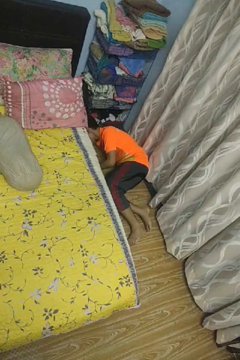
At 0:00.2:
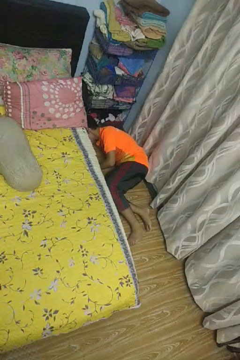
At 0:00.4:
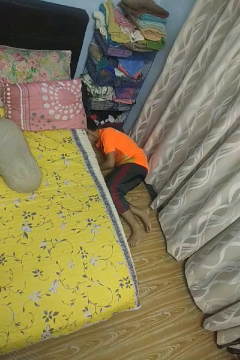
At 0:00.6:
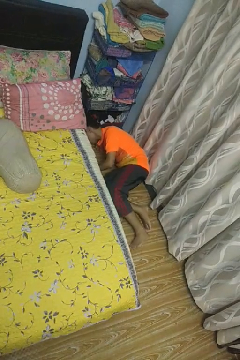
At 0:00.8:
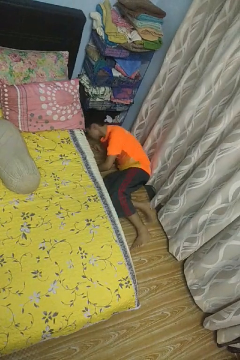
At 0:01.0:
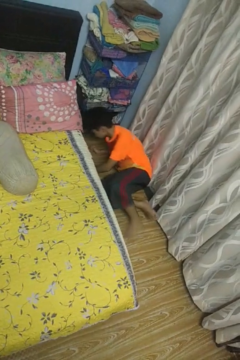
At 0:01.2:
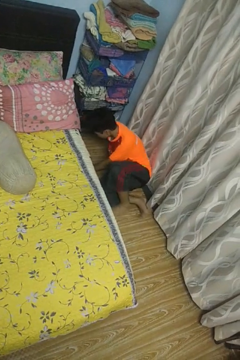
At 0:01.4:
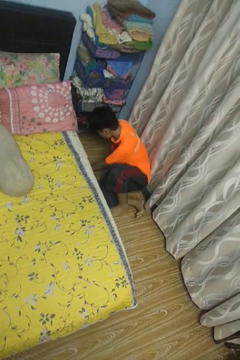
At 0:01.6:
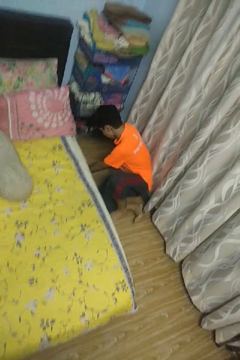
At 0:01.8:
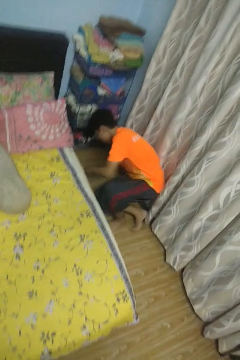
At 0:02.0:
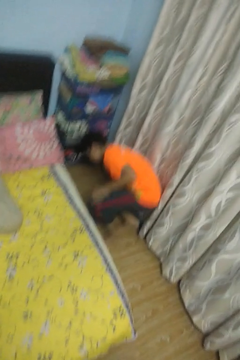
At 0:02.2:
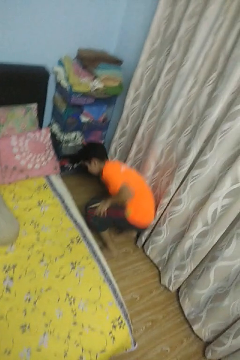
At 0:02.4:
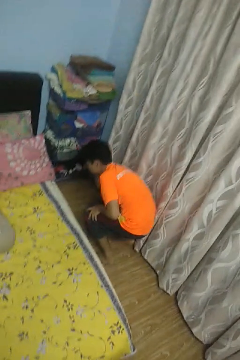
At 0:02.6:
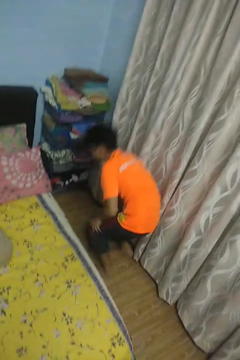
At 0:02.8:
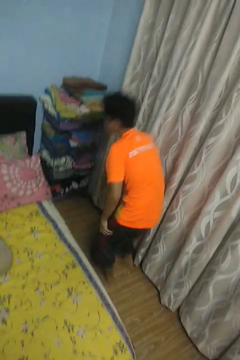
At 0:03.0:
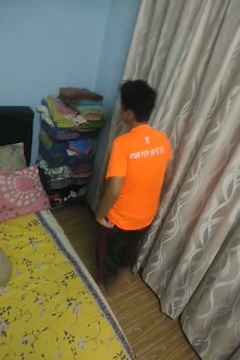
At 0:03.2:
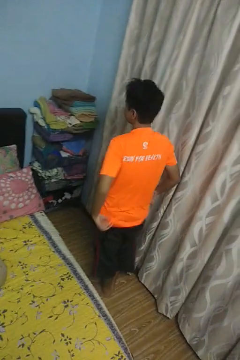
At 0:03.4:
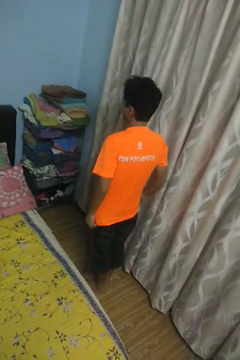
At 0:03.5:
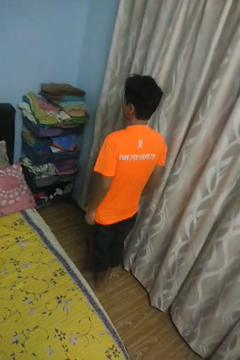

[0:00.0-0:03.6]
person stands up from floor

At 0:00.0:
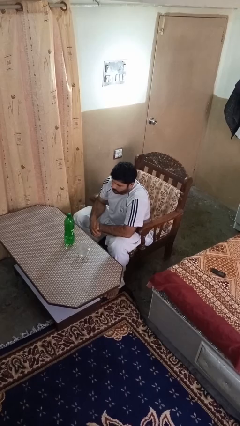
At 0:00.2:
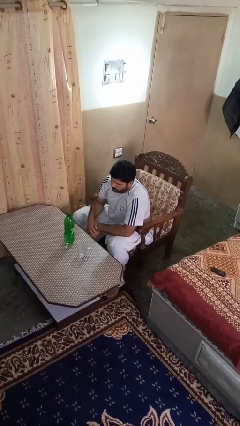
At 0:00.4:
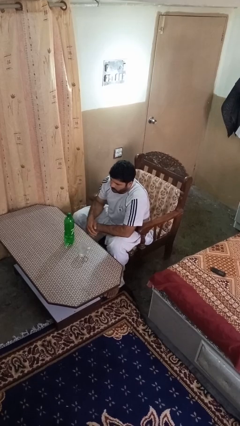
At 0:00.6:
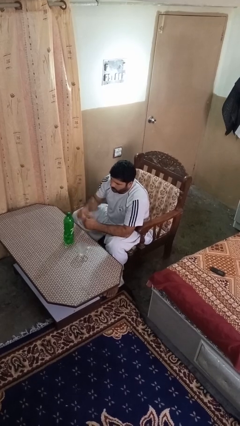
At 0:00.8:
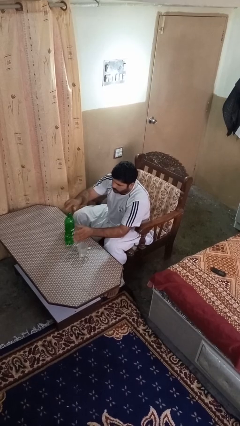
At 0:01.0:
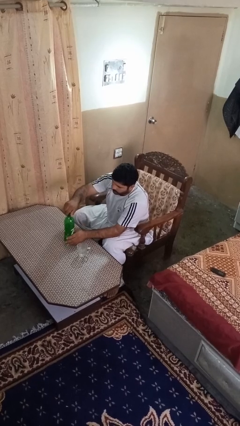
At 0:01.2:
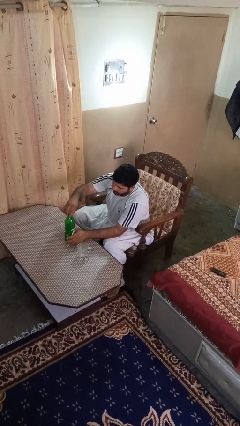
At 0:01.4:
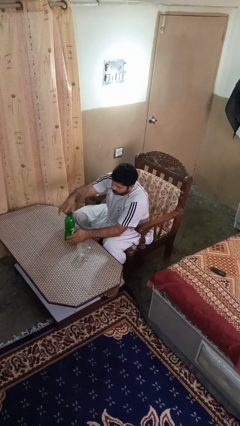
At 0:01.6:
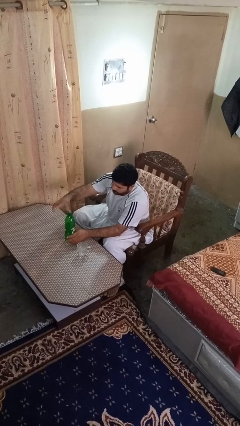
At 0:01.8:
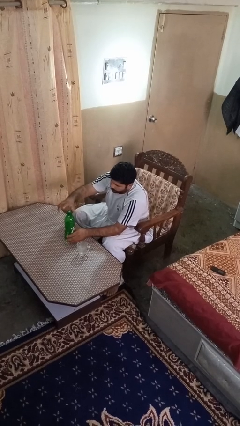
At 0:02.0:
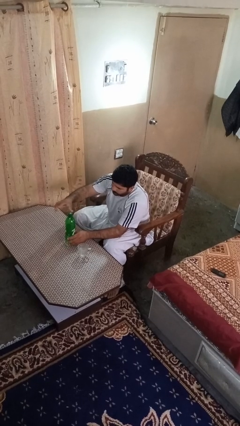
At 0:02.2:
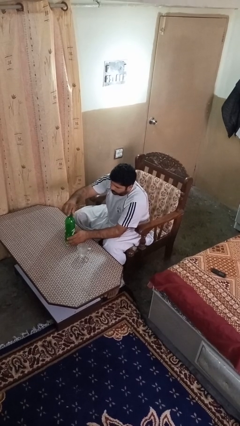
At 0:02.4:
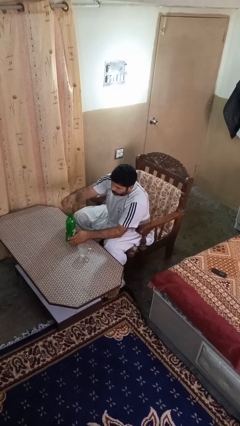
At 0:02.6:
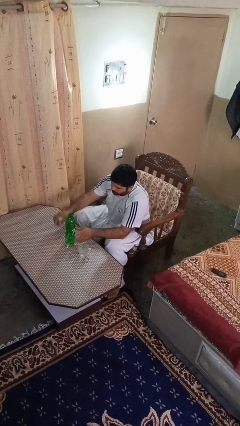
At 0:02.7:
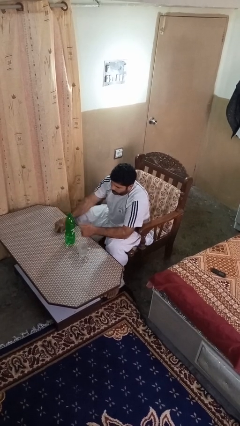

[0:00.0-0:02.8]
person unscrews lid from bottle

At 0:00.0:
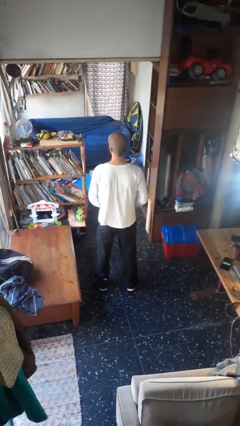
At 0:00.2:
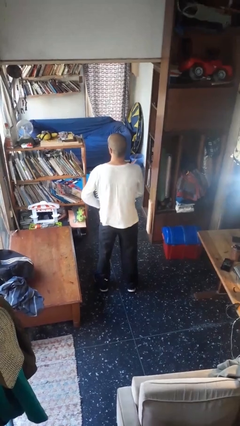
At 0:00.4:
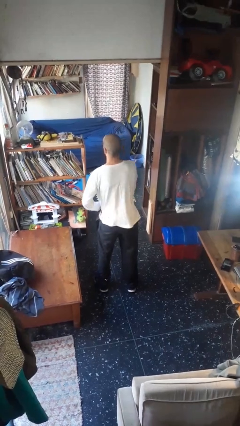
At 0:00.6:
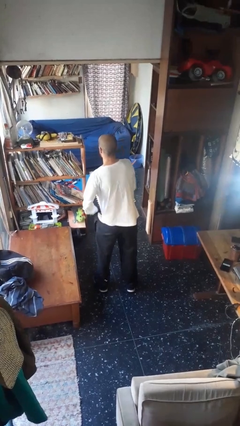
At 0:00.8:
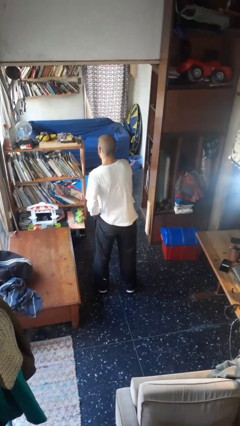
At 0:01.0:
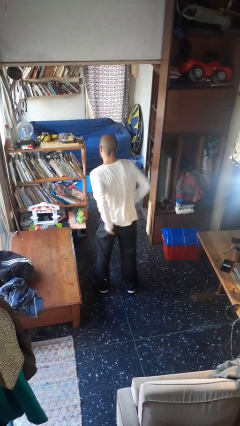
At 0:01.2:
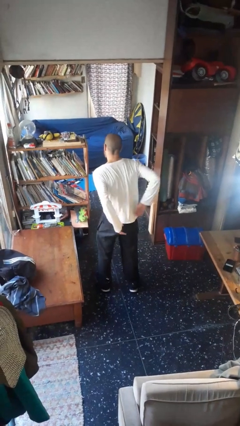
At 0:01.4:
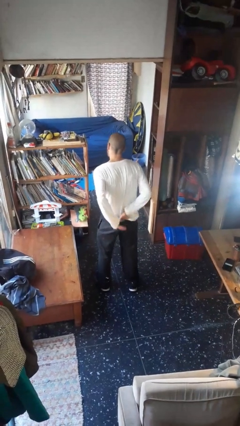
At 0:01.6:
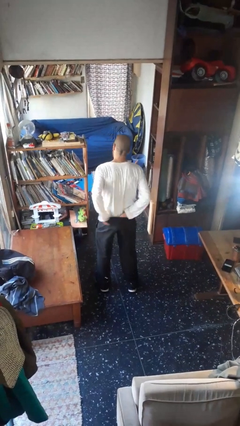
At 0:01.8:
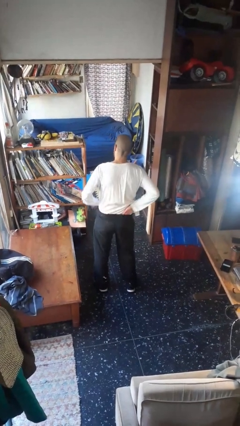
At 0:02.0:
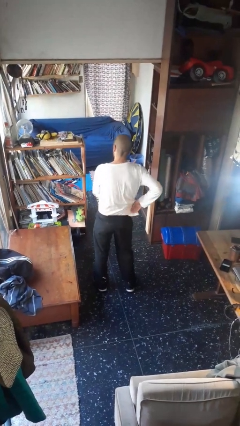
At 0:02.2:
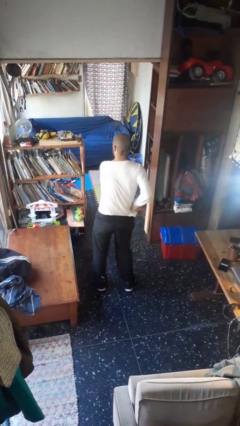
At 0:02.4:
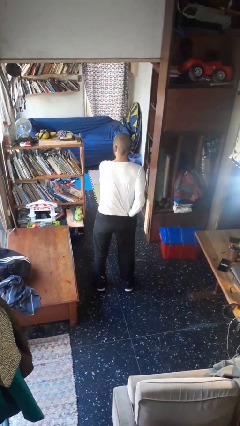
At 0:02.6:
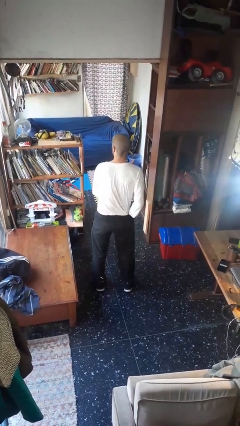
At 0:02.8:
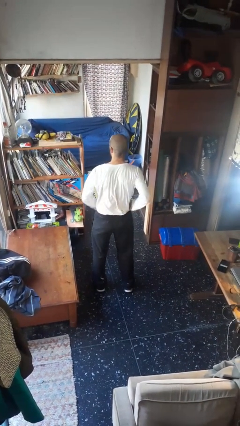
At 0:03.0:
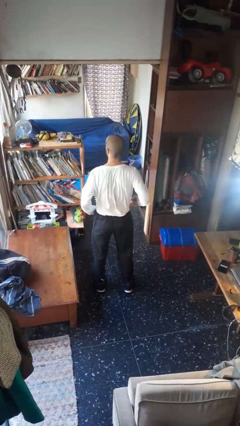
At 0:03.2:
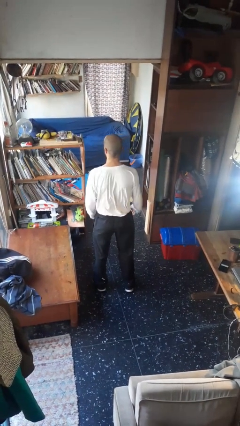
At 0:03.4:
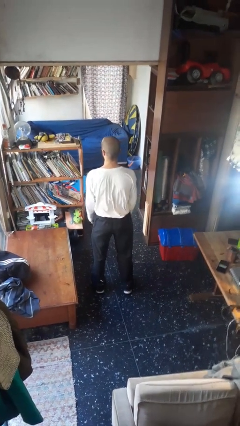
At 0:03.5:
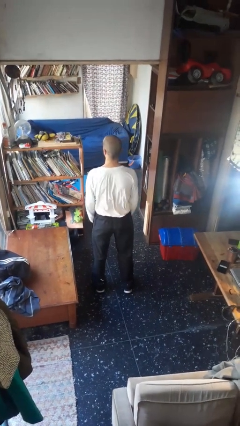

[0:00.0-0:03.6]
person tucks in shirt

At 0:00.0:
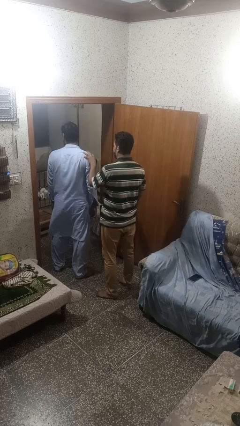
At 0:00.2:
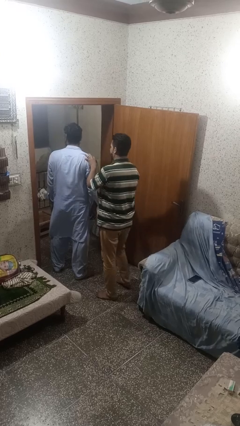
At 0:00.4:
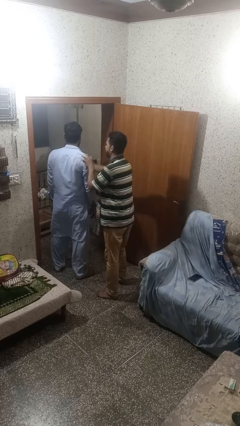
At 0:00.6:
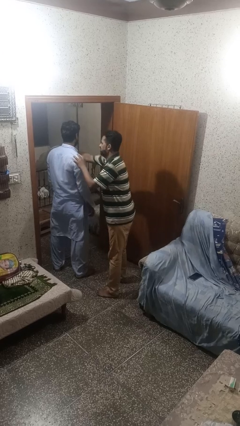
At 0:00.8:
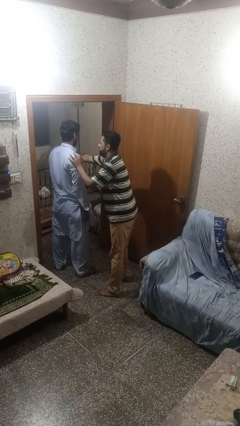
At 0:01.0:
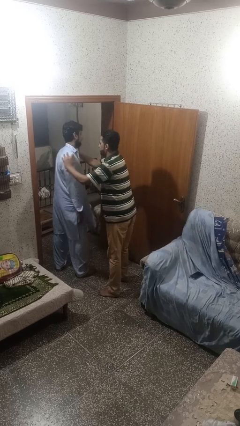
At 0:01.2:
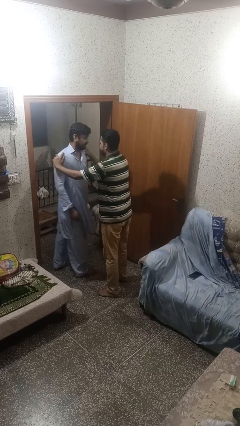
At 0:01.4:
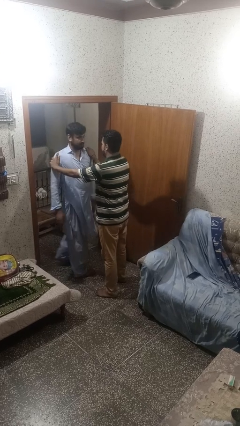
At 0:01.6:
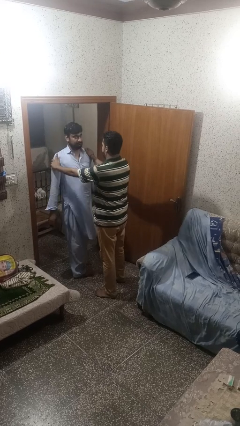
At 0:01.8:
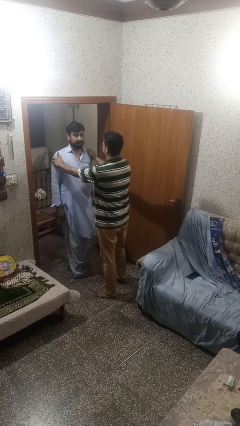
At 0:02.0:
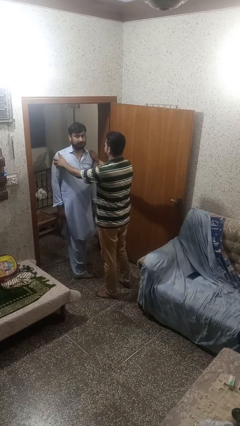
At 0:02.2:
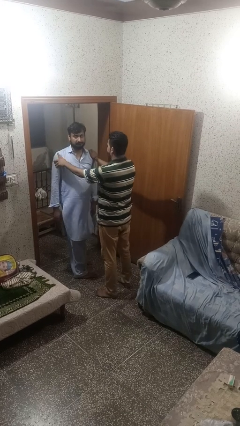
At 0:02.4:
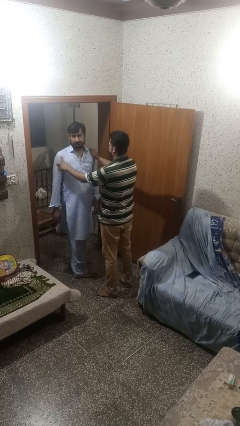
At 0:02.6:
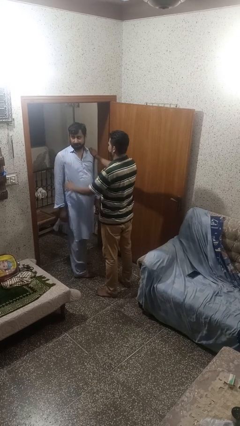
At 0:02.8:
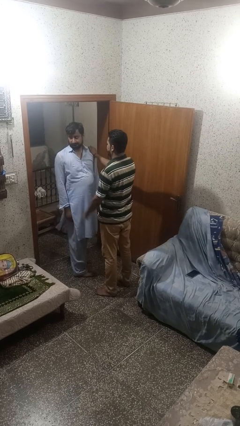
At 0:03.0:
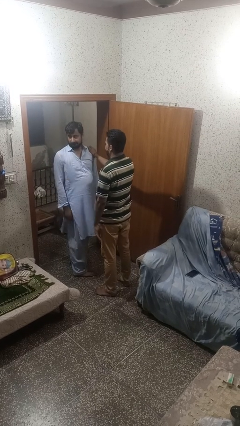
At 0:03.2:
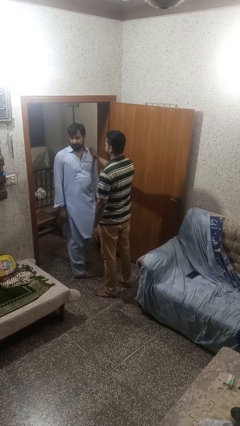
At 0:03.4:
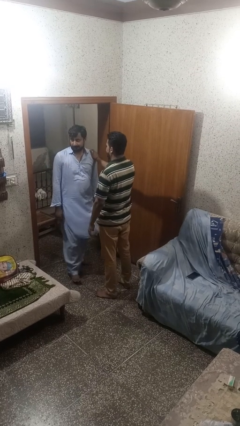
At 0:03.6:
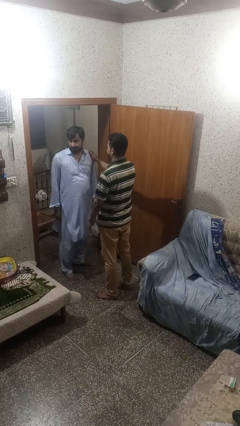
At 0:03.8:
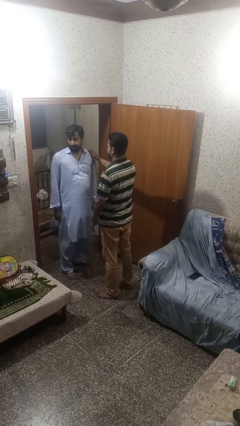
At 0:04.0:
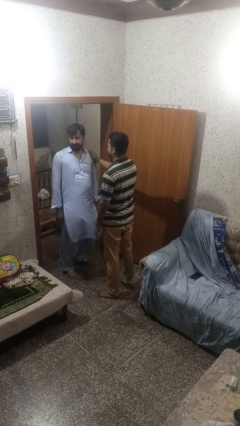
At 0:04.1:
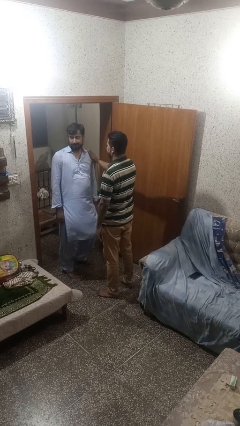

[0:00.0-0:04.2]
person spins person around

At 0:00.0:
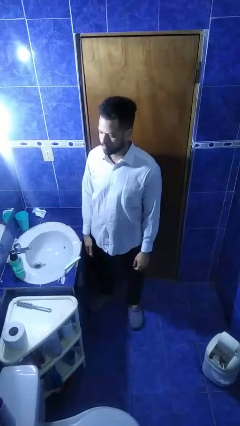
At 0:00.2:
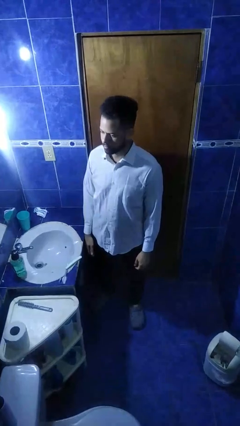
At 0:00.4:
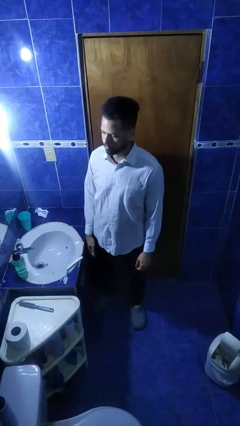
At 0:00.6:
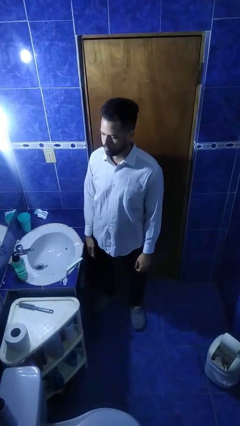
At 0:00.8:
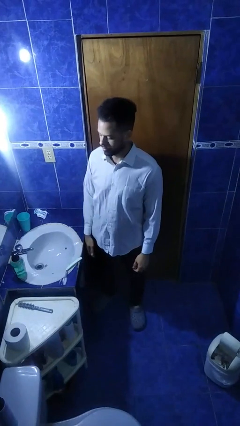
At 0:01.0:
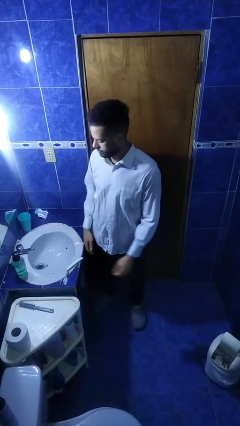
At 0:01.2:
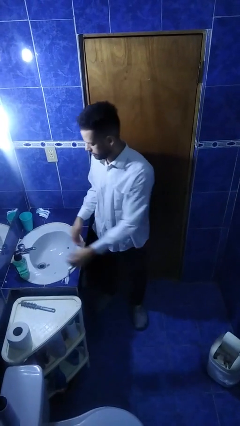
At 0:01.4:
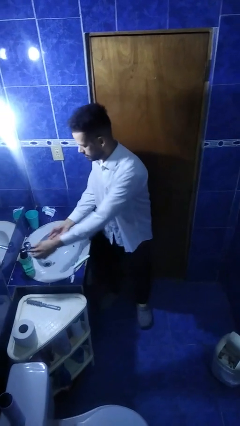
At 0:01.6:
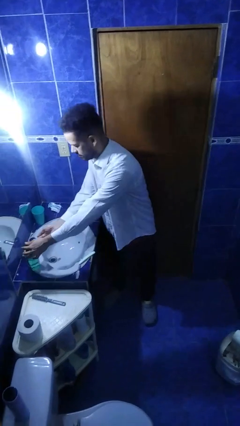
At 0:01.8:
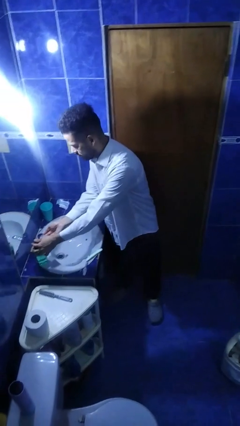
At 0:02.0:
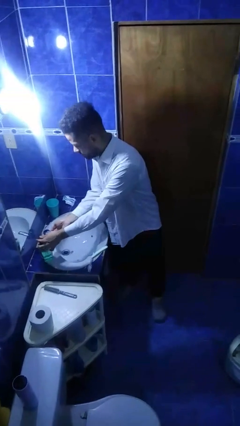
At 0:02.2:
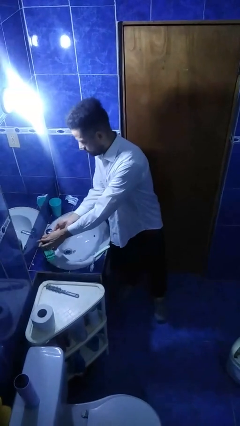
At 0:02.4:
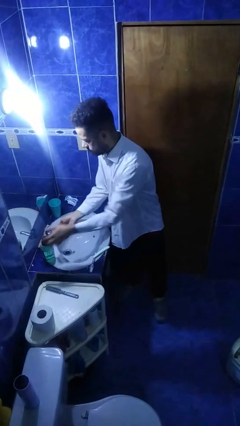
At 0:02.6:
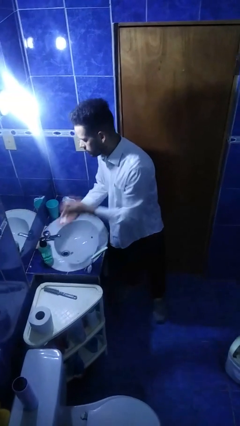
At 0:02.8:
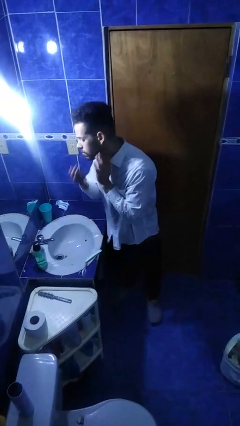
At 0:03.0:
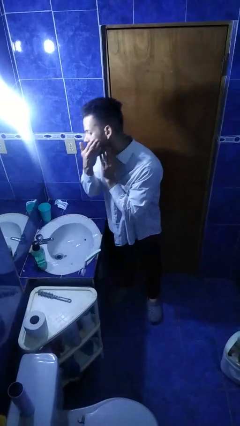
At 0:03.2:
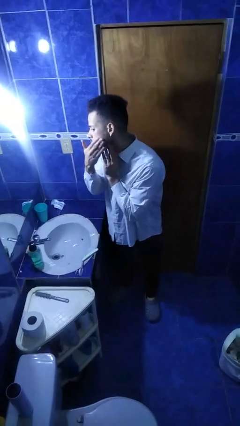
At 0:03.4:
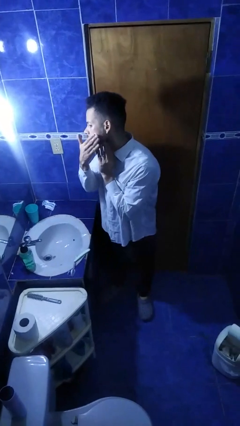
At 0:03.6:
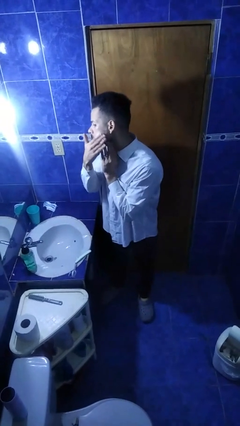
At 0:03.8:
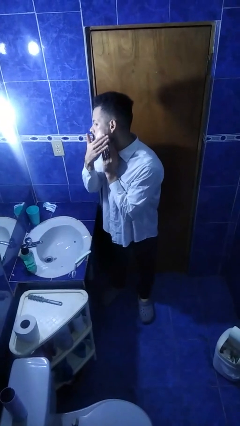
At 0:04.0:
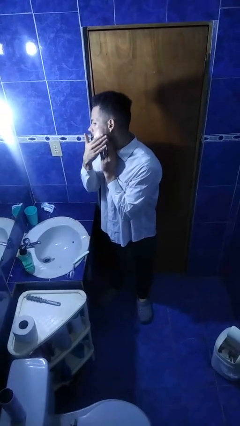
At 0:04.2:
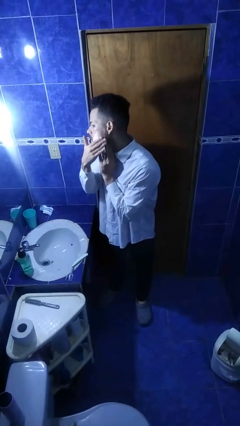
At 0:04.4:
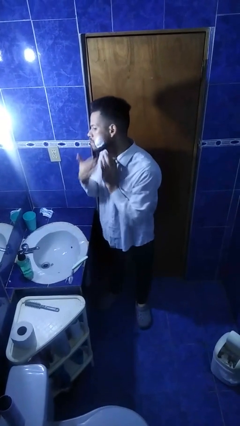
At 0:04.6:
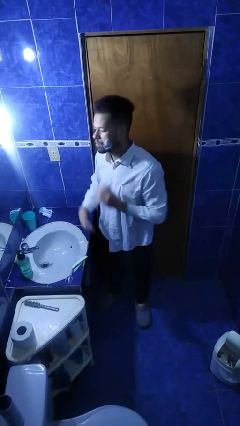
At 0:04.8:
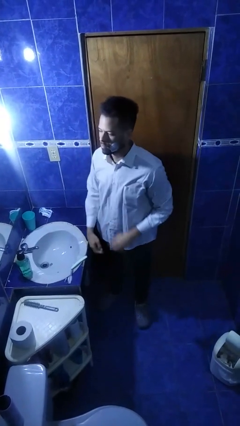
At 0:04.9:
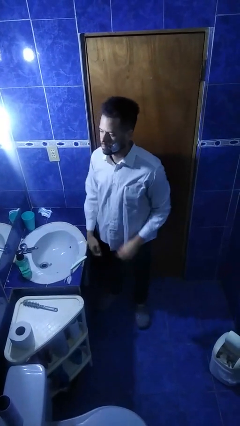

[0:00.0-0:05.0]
person applies shaving cream
